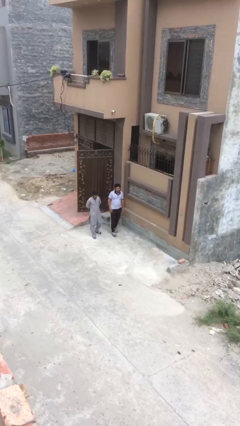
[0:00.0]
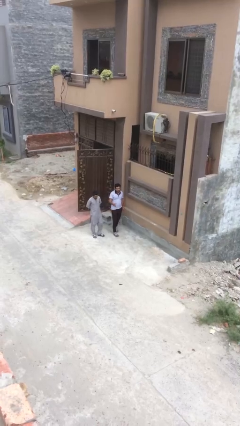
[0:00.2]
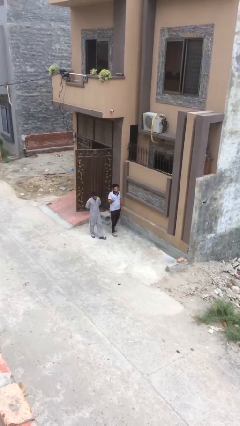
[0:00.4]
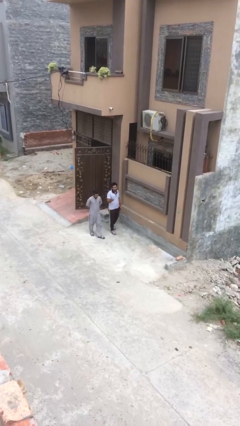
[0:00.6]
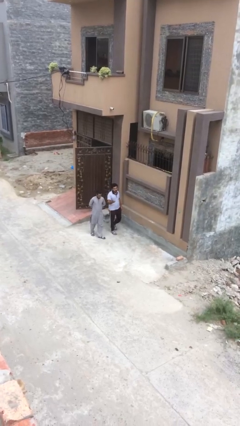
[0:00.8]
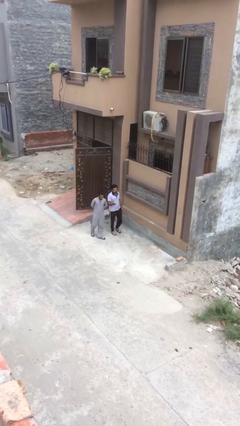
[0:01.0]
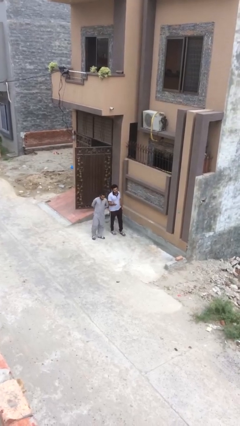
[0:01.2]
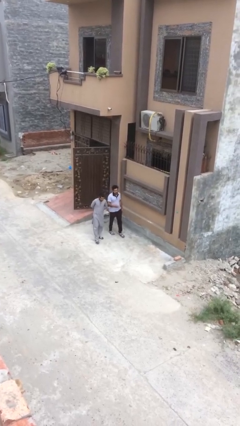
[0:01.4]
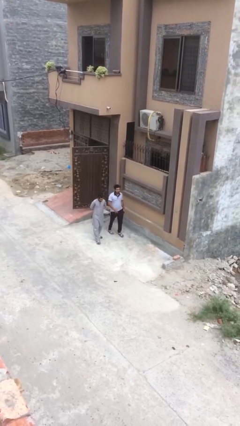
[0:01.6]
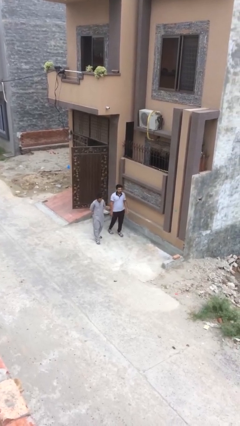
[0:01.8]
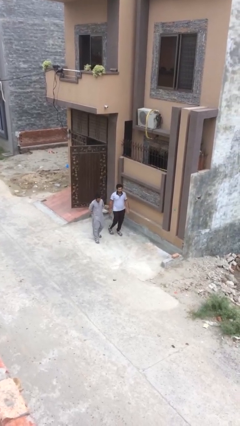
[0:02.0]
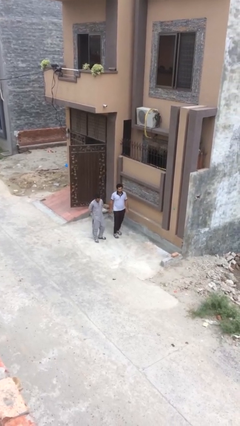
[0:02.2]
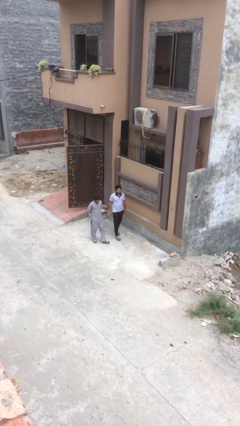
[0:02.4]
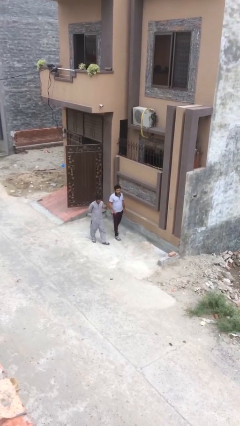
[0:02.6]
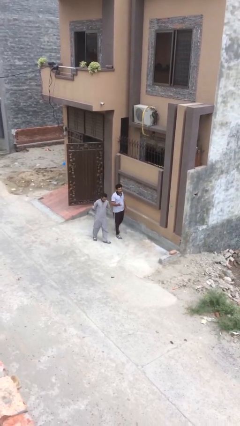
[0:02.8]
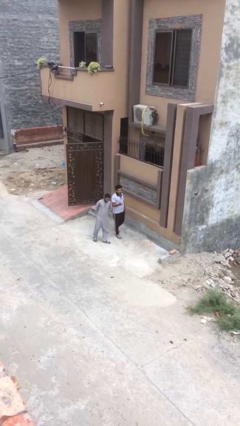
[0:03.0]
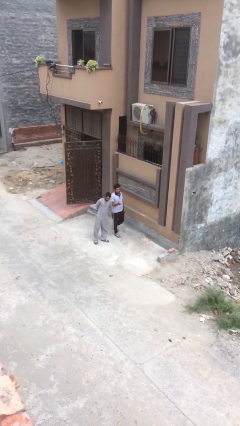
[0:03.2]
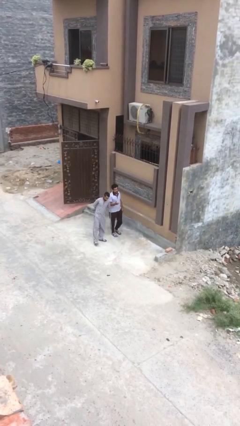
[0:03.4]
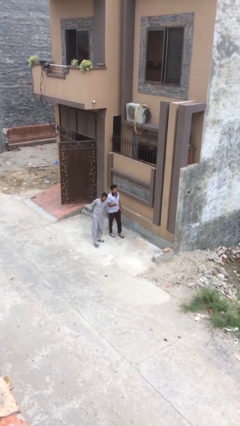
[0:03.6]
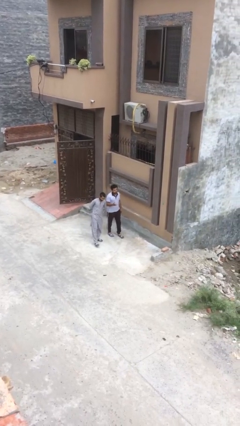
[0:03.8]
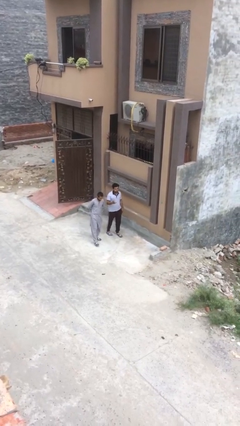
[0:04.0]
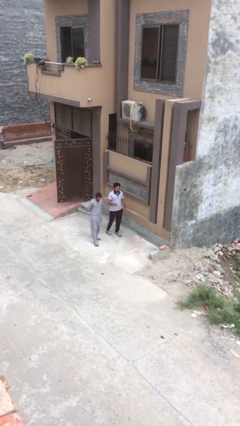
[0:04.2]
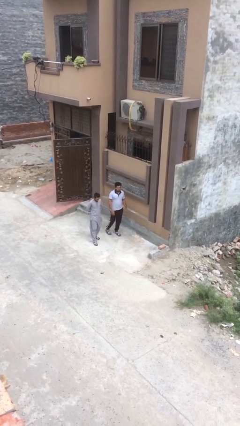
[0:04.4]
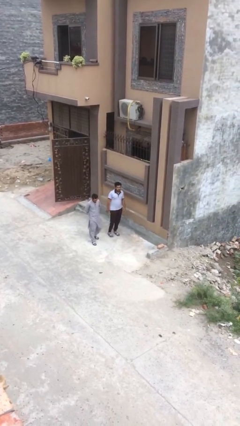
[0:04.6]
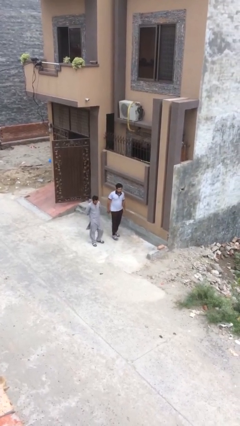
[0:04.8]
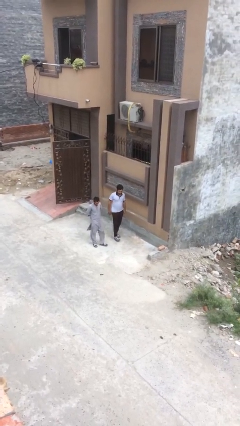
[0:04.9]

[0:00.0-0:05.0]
person talks to person

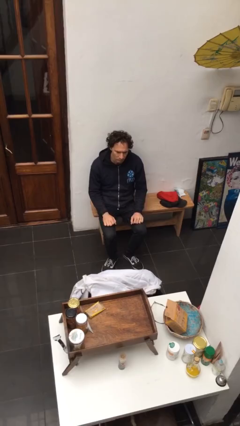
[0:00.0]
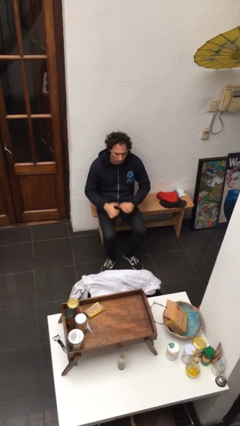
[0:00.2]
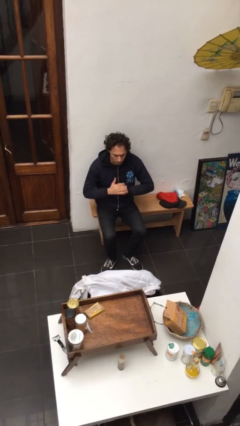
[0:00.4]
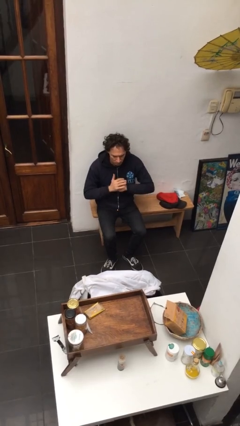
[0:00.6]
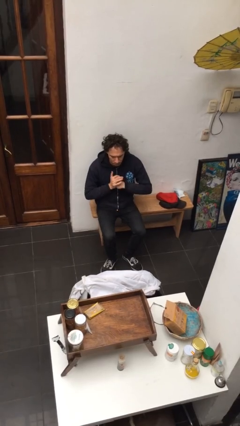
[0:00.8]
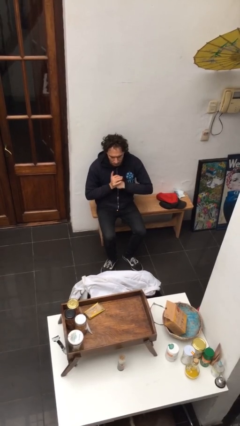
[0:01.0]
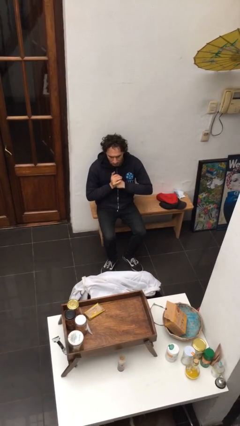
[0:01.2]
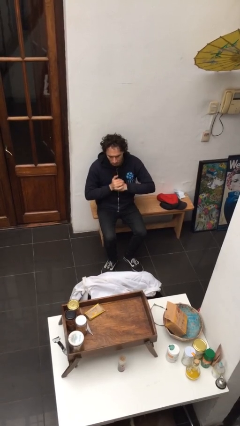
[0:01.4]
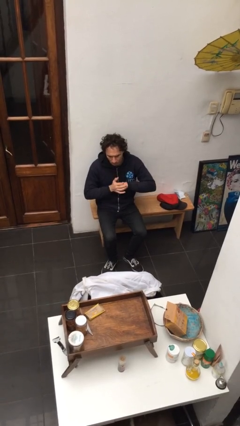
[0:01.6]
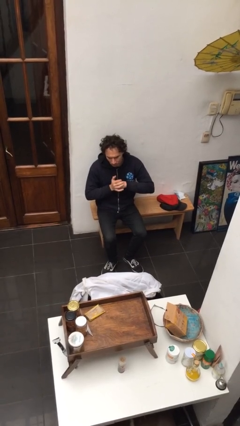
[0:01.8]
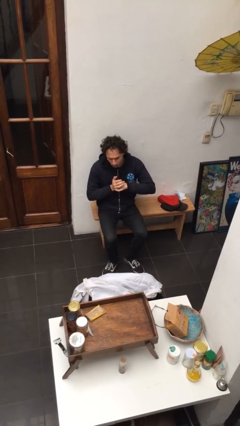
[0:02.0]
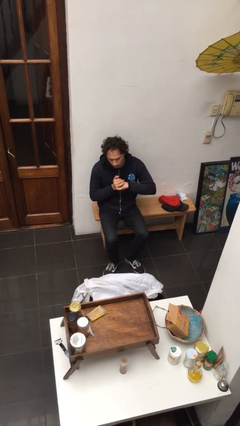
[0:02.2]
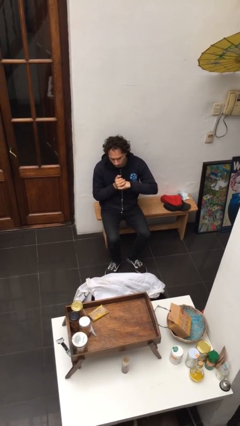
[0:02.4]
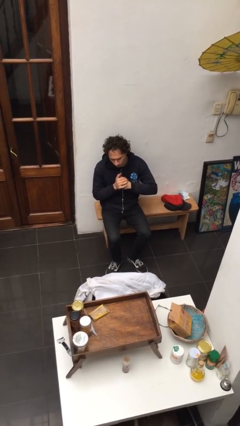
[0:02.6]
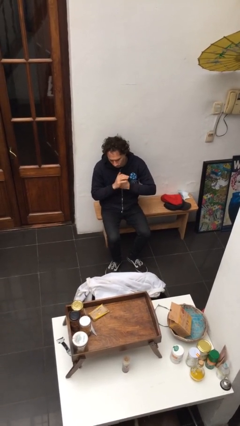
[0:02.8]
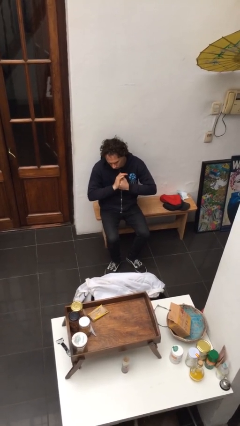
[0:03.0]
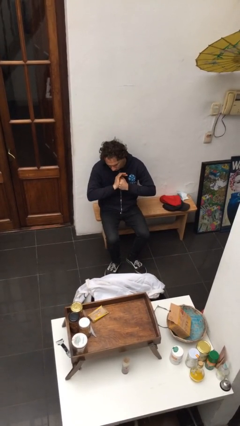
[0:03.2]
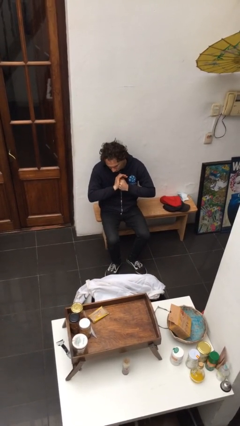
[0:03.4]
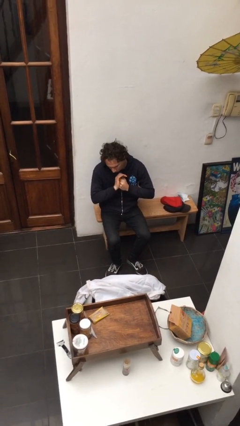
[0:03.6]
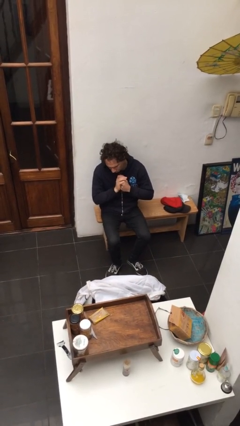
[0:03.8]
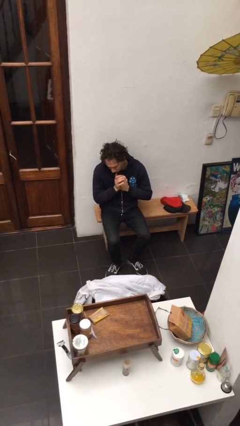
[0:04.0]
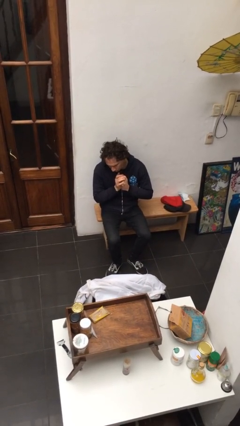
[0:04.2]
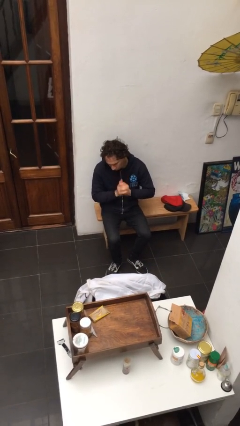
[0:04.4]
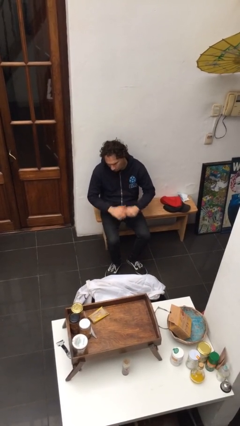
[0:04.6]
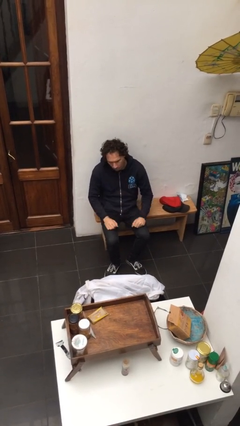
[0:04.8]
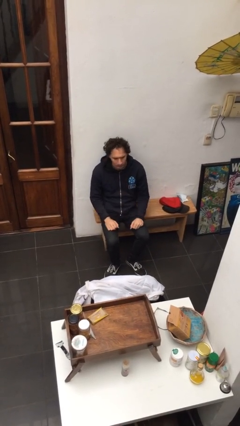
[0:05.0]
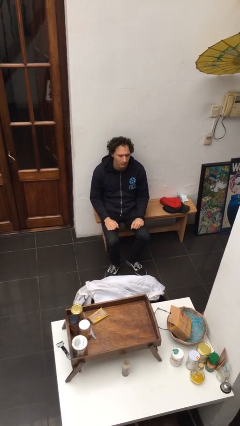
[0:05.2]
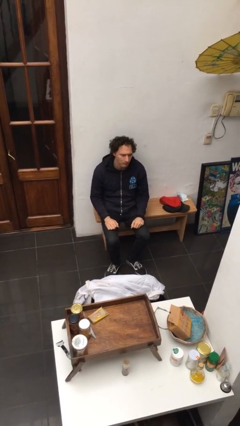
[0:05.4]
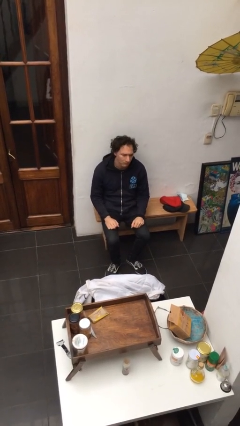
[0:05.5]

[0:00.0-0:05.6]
person cracks knuckles

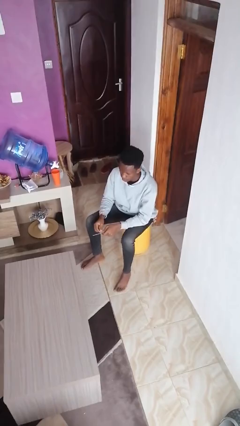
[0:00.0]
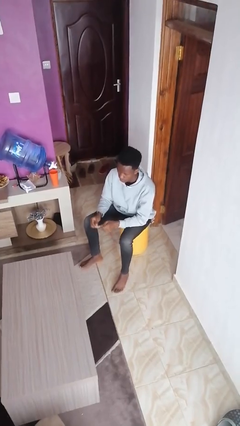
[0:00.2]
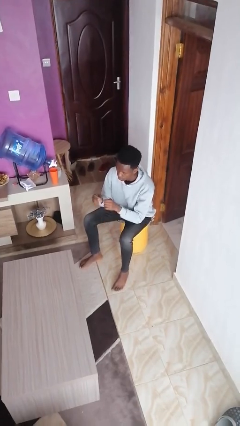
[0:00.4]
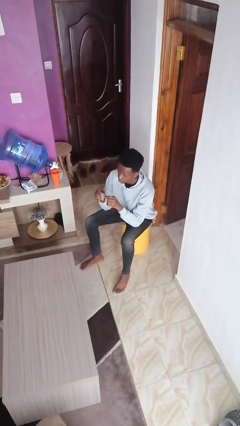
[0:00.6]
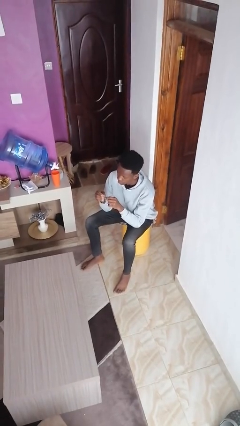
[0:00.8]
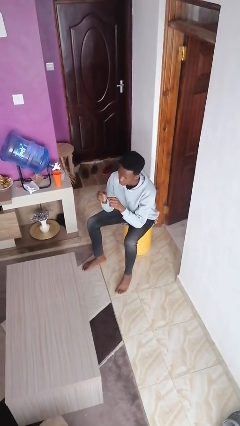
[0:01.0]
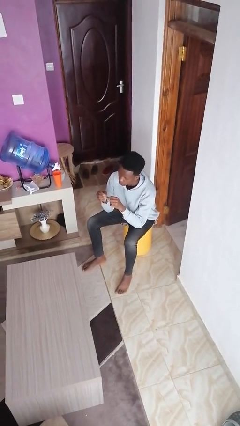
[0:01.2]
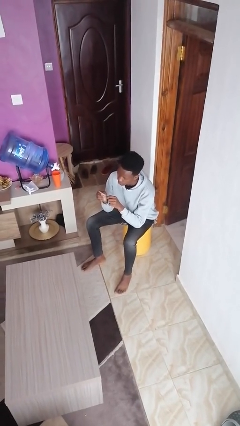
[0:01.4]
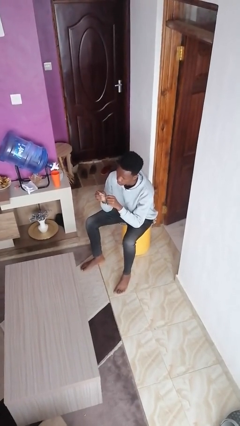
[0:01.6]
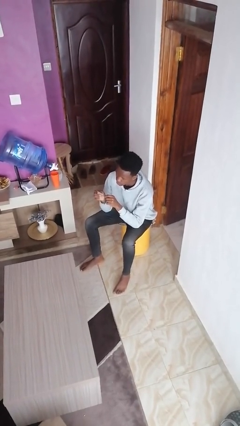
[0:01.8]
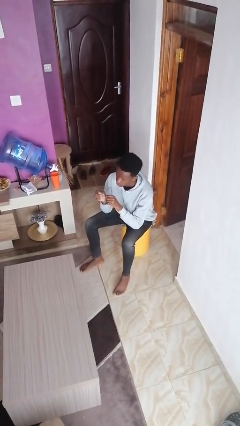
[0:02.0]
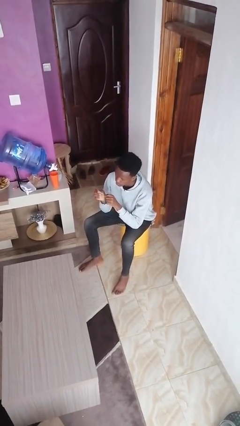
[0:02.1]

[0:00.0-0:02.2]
person files fingernails

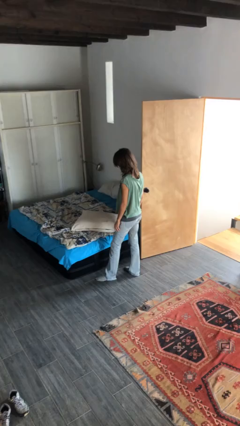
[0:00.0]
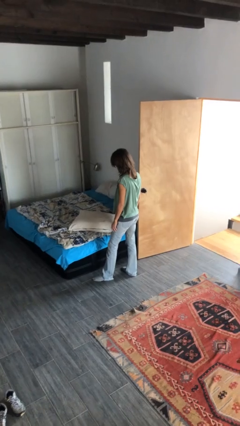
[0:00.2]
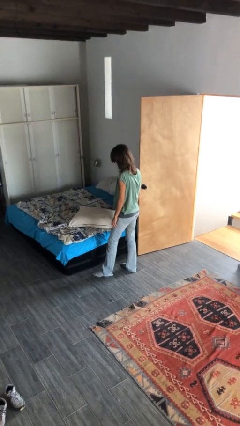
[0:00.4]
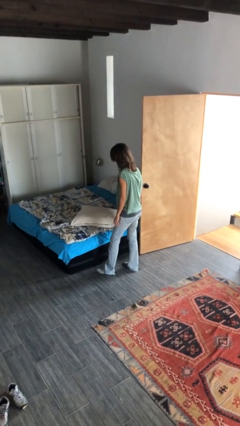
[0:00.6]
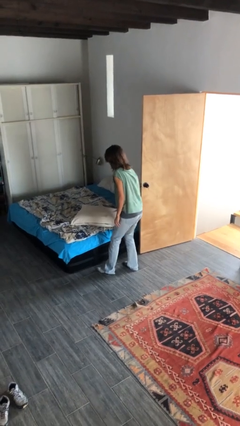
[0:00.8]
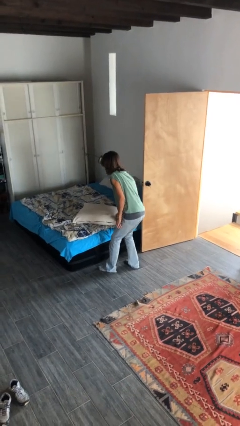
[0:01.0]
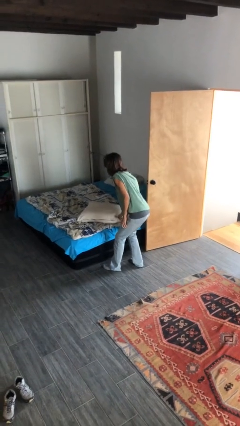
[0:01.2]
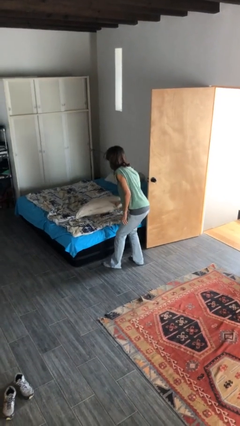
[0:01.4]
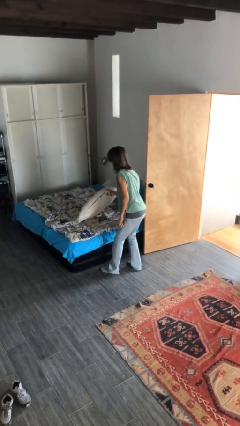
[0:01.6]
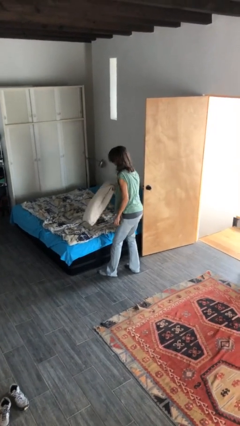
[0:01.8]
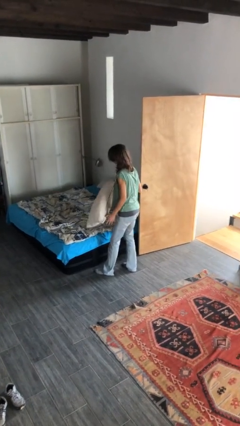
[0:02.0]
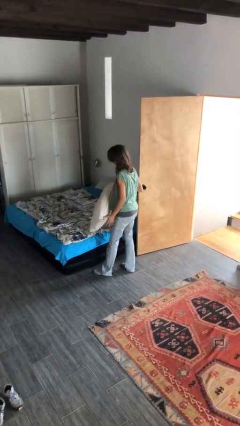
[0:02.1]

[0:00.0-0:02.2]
person picks up object from bed

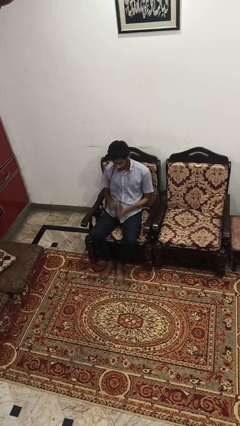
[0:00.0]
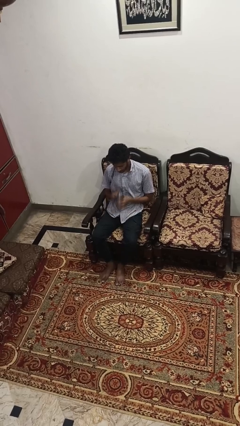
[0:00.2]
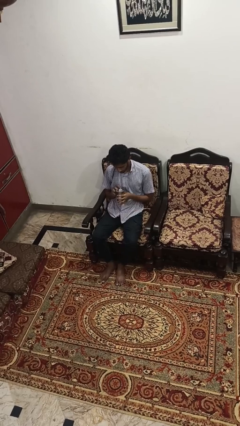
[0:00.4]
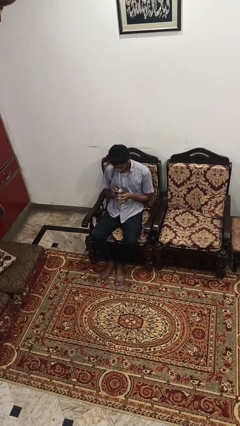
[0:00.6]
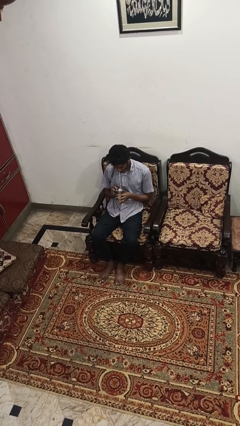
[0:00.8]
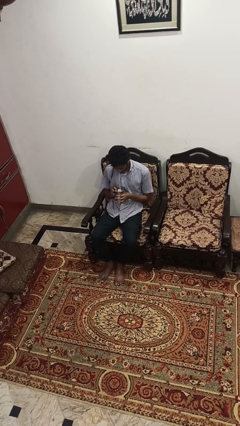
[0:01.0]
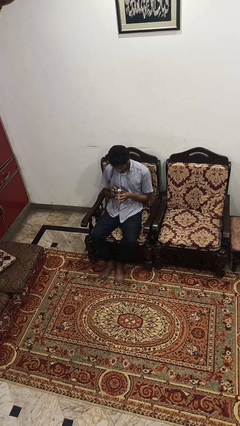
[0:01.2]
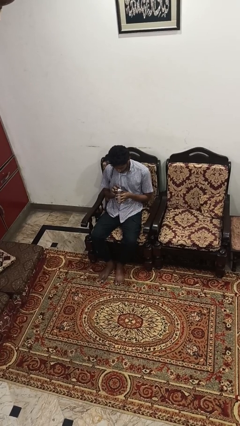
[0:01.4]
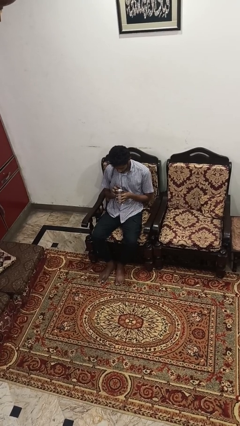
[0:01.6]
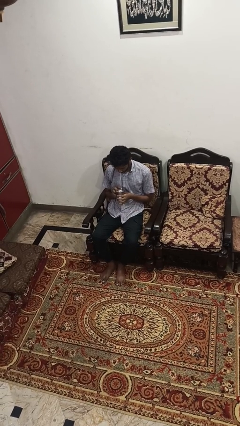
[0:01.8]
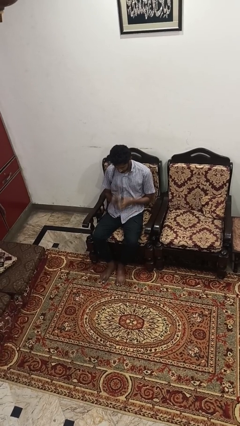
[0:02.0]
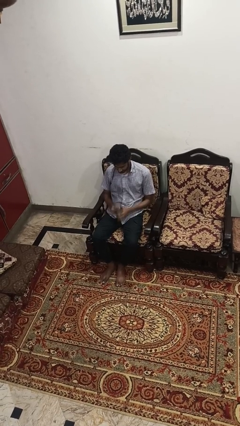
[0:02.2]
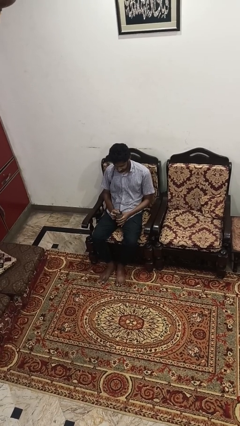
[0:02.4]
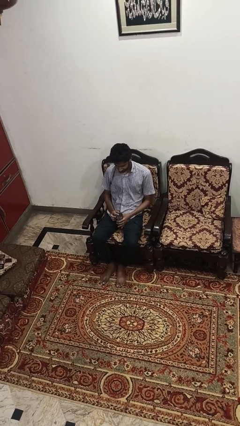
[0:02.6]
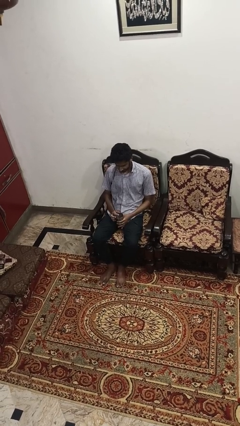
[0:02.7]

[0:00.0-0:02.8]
person drinks from straw
